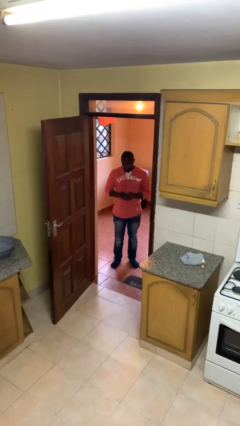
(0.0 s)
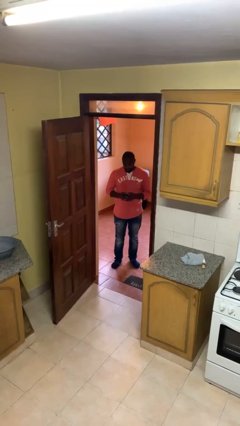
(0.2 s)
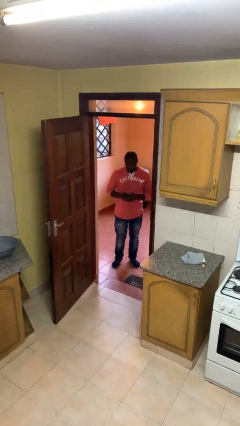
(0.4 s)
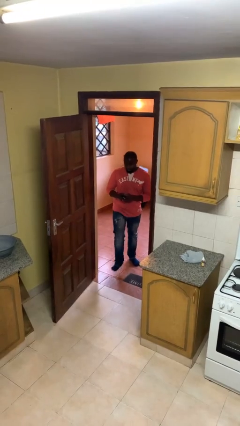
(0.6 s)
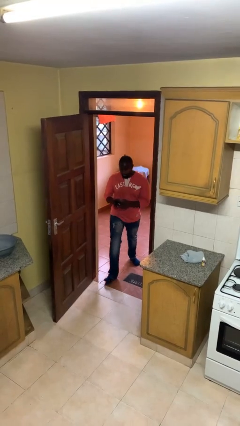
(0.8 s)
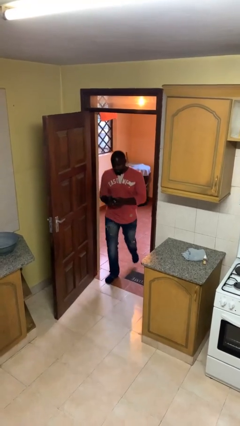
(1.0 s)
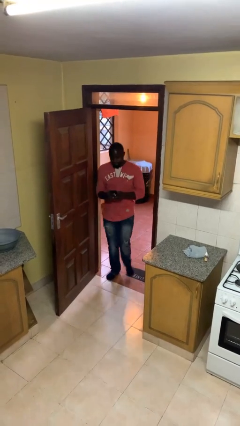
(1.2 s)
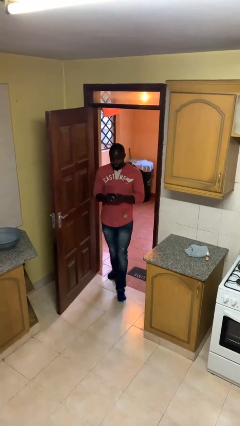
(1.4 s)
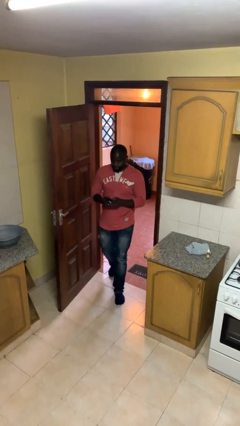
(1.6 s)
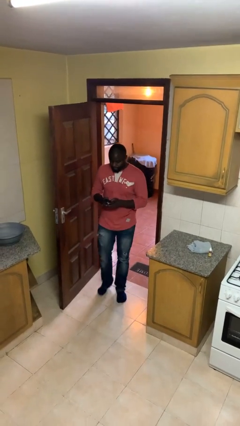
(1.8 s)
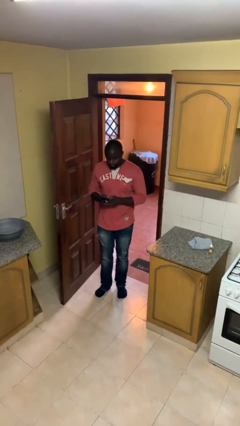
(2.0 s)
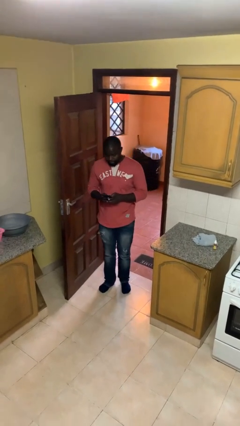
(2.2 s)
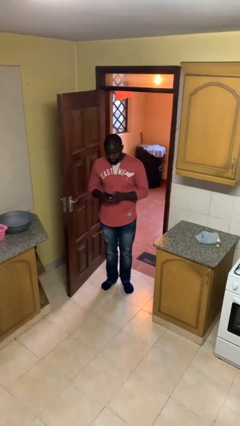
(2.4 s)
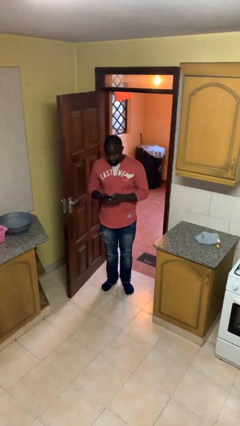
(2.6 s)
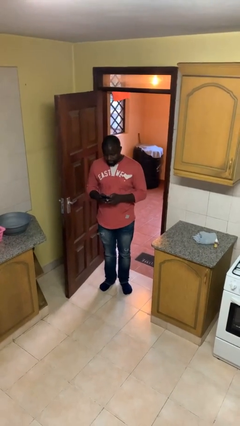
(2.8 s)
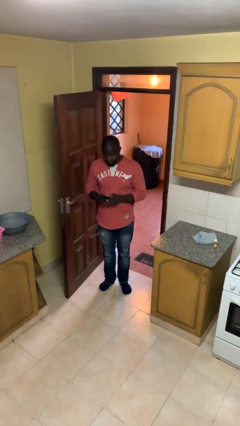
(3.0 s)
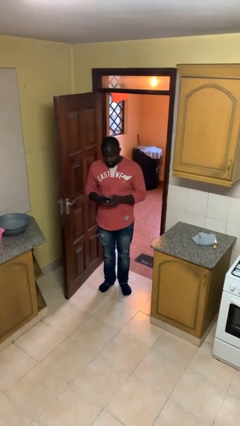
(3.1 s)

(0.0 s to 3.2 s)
person enters scene through structure

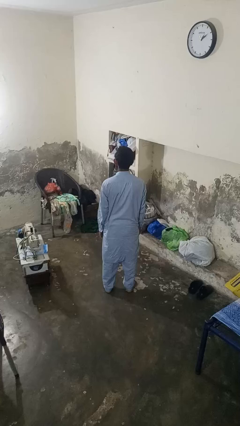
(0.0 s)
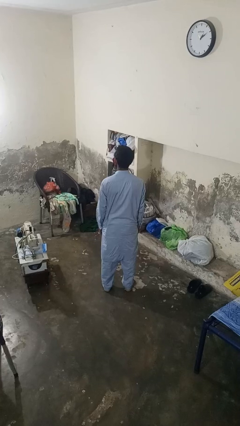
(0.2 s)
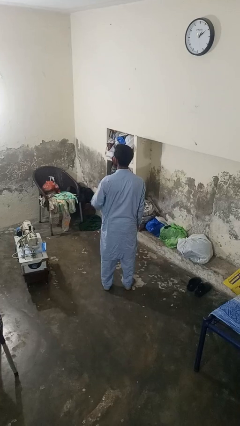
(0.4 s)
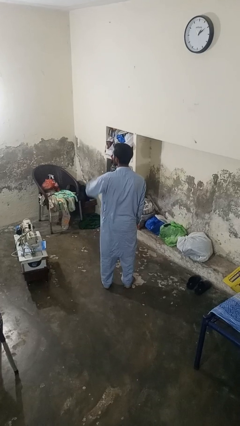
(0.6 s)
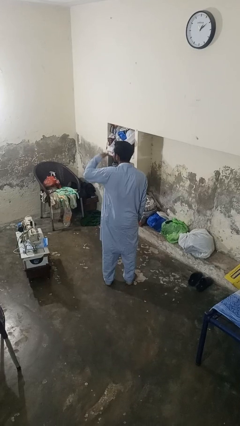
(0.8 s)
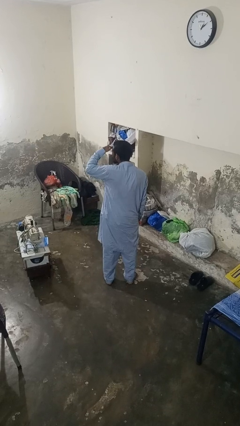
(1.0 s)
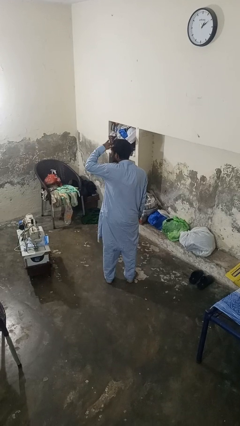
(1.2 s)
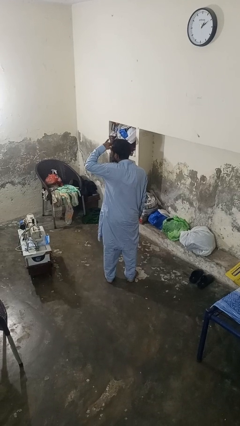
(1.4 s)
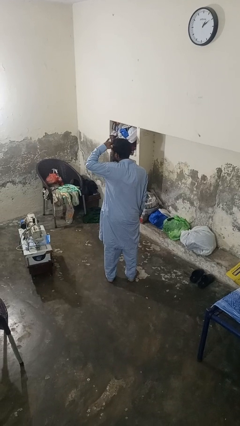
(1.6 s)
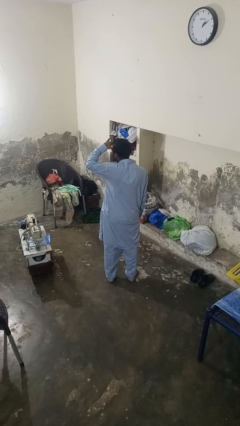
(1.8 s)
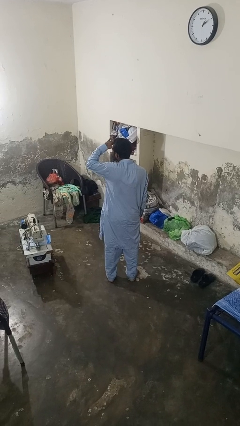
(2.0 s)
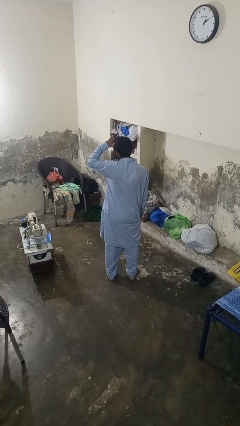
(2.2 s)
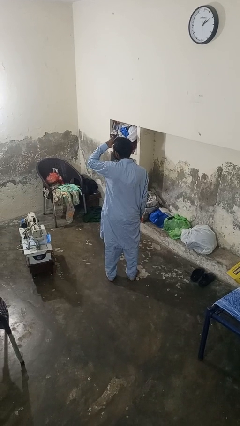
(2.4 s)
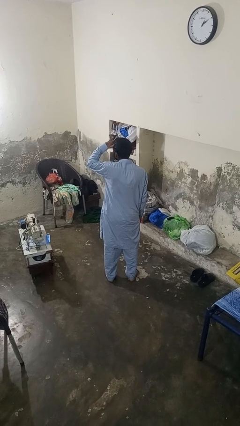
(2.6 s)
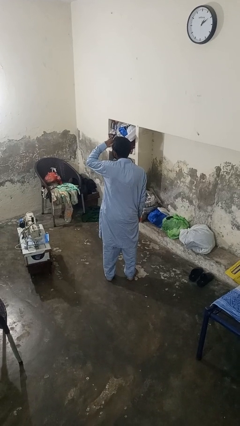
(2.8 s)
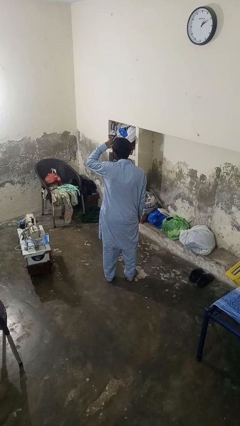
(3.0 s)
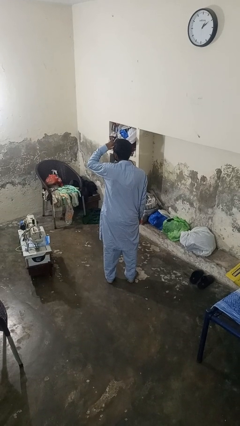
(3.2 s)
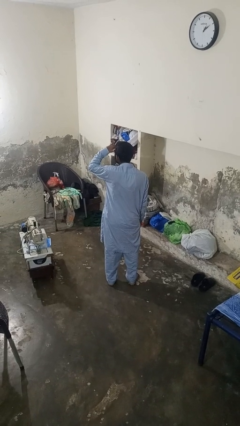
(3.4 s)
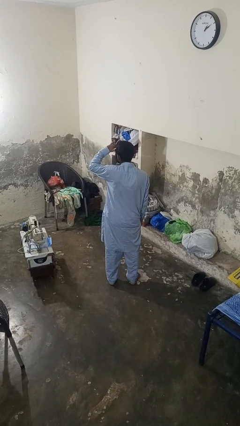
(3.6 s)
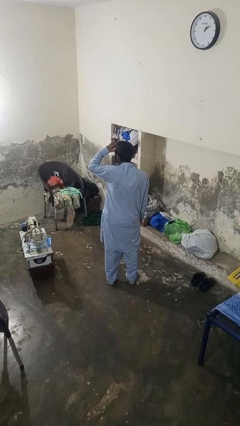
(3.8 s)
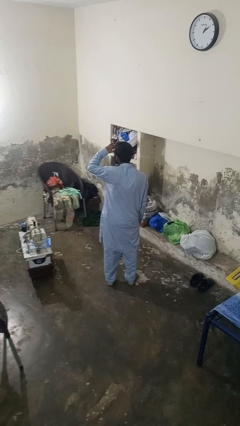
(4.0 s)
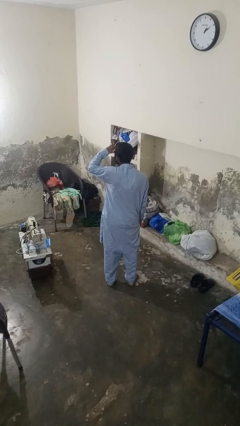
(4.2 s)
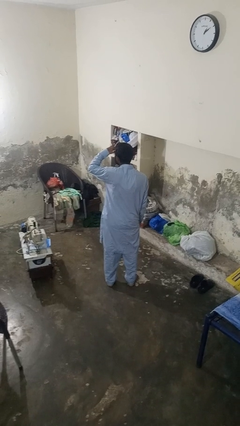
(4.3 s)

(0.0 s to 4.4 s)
person shades eyes

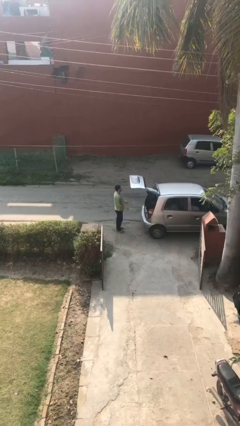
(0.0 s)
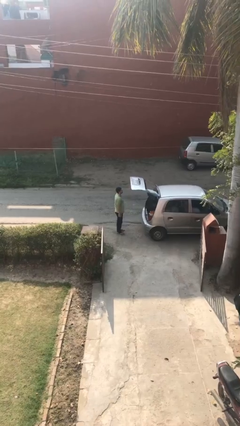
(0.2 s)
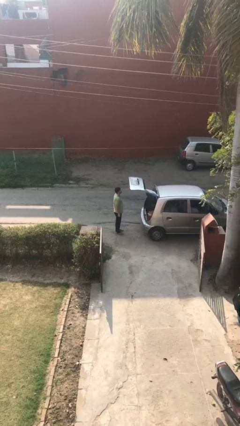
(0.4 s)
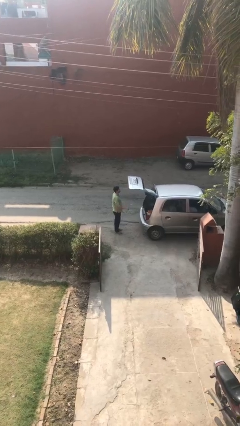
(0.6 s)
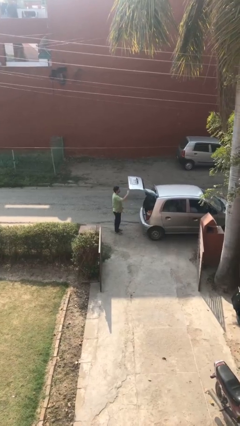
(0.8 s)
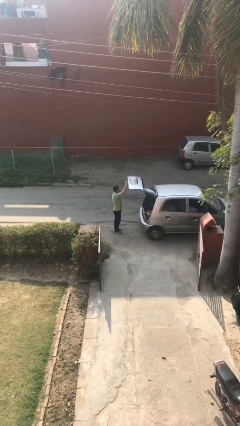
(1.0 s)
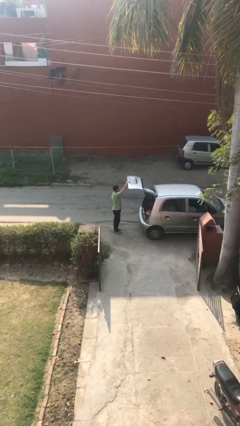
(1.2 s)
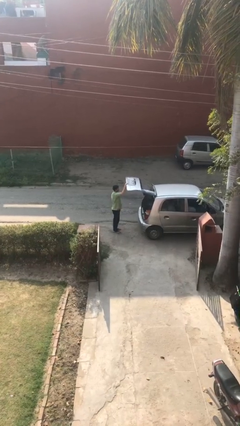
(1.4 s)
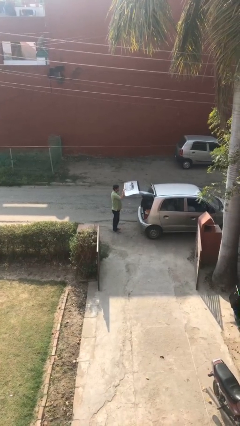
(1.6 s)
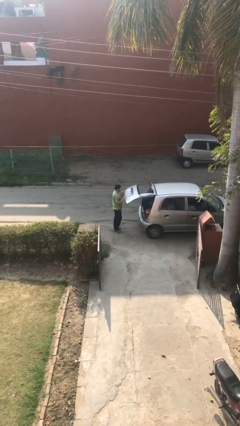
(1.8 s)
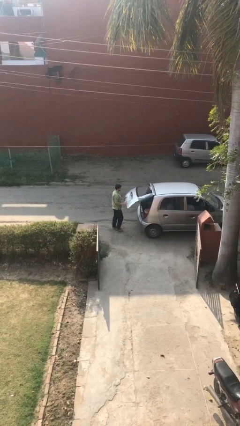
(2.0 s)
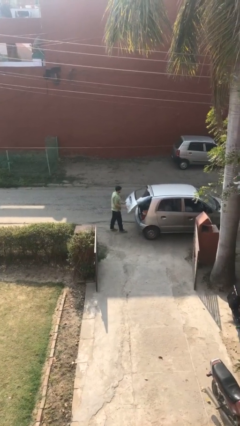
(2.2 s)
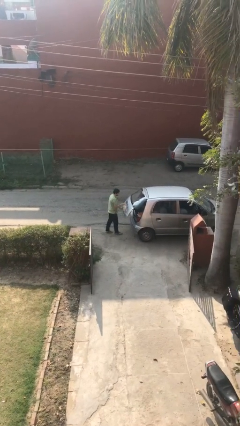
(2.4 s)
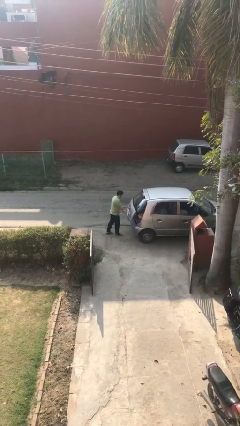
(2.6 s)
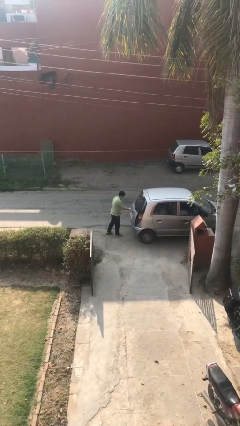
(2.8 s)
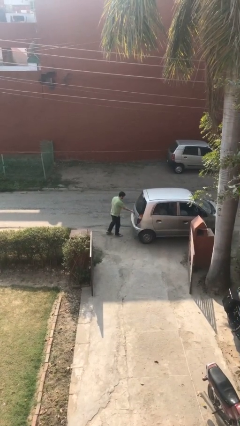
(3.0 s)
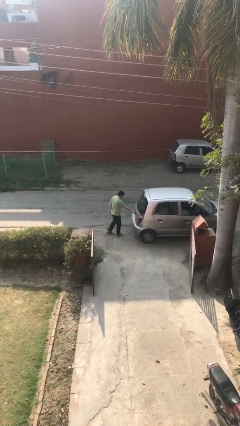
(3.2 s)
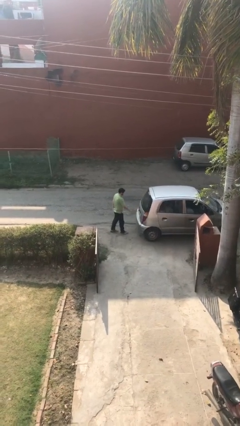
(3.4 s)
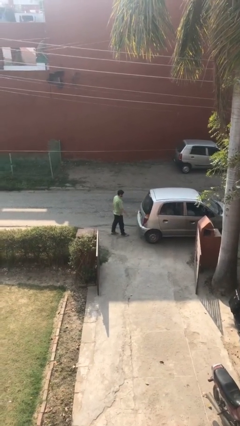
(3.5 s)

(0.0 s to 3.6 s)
person closes car trunk

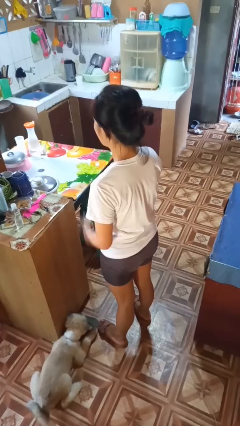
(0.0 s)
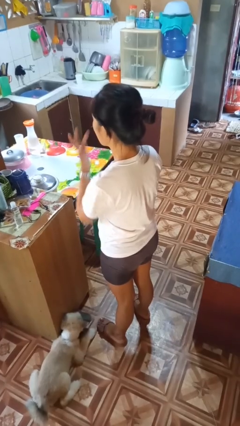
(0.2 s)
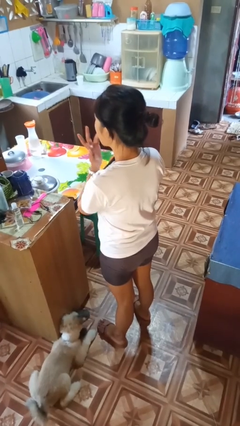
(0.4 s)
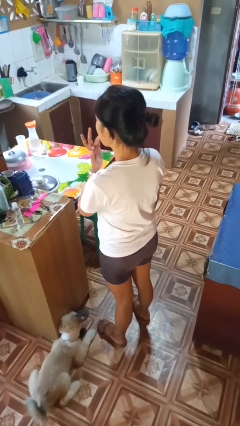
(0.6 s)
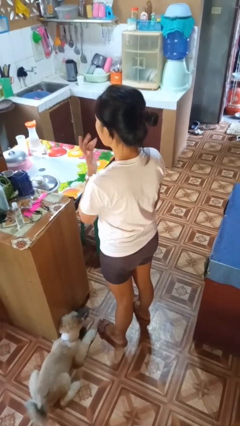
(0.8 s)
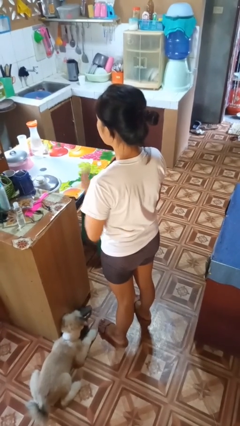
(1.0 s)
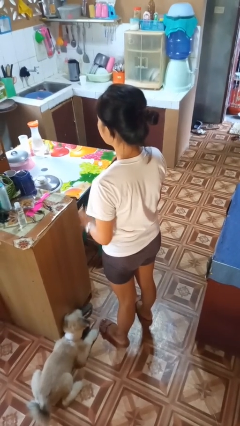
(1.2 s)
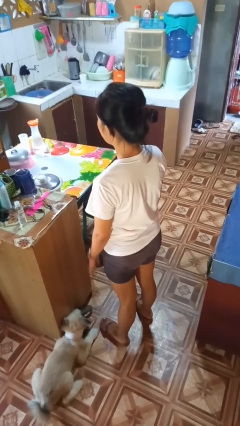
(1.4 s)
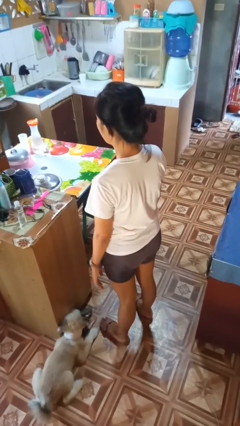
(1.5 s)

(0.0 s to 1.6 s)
person licks fingers

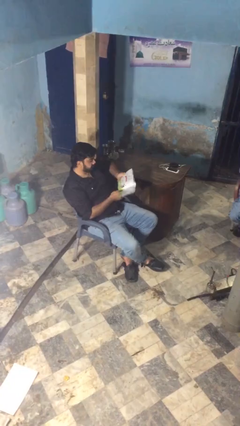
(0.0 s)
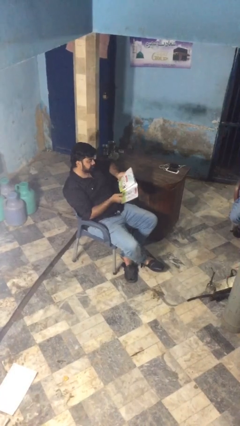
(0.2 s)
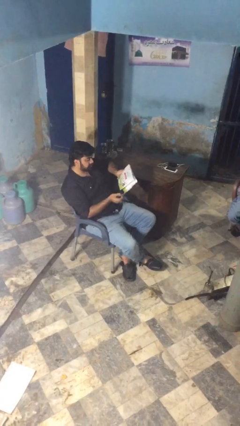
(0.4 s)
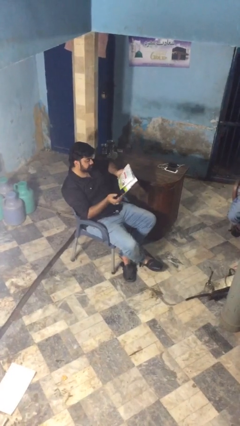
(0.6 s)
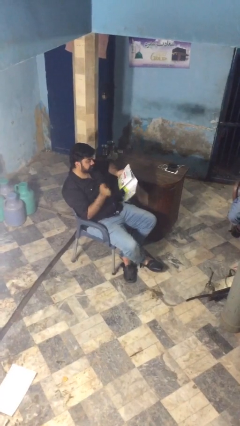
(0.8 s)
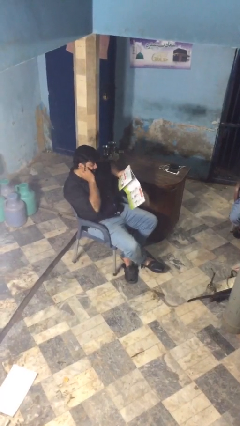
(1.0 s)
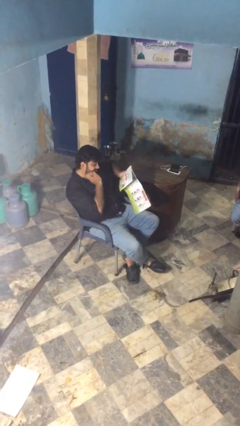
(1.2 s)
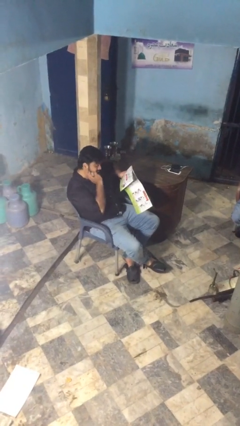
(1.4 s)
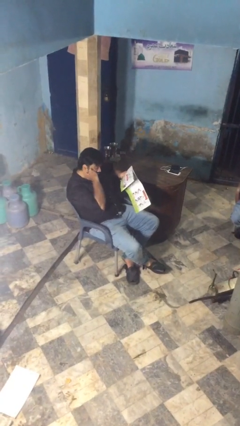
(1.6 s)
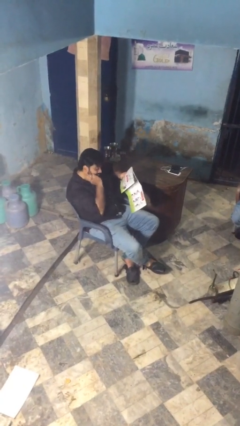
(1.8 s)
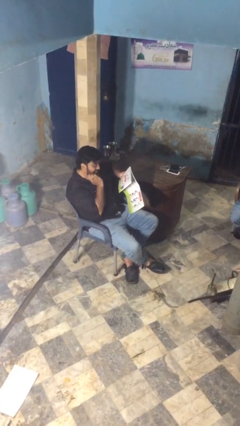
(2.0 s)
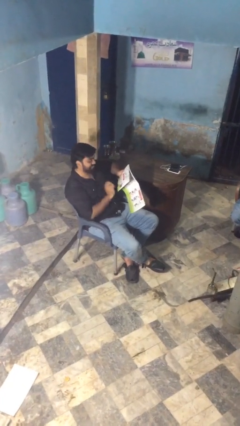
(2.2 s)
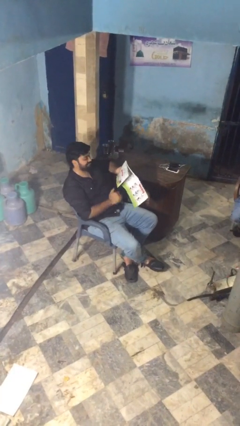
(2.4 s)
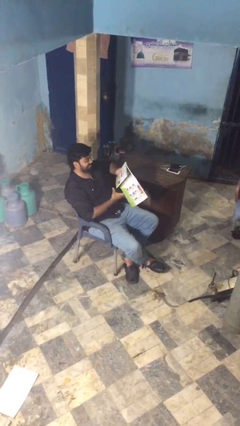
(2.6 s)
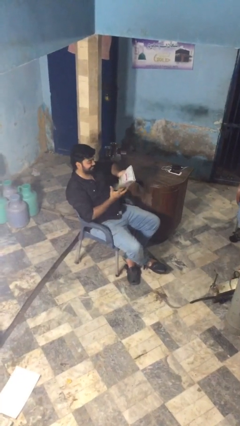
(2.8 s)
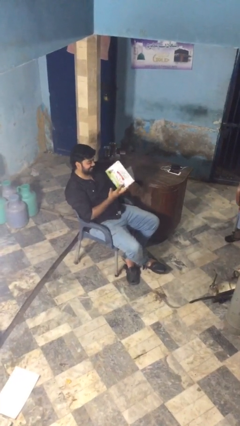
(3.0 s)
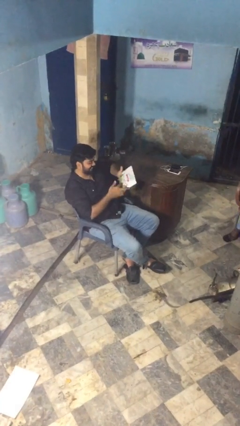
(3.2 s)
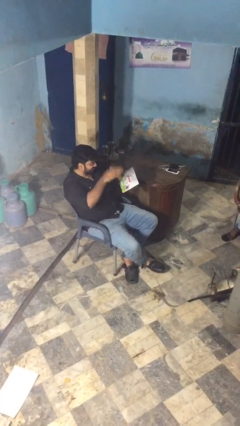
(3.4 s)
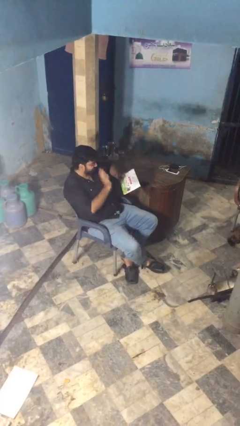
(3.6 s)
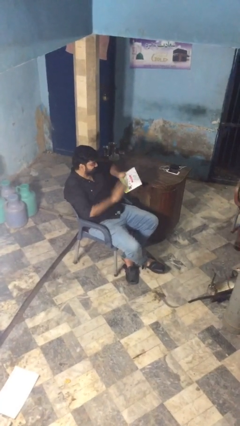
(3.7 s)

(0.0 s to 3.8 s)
person reads document

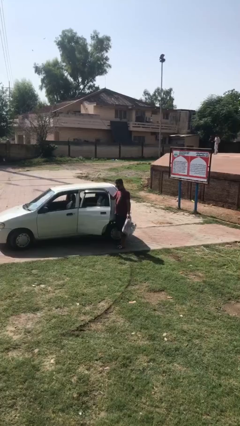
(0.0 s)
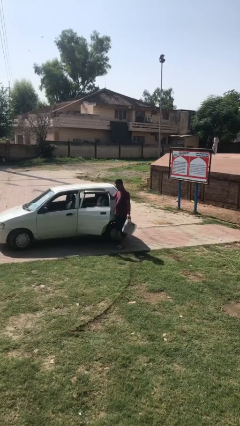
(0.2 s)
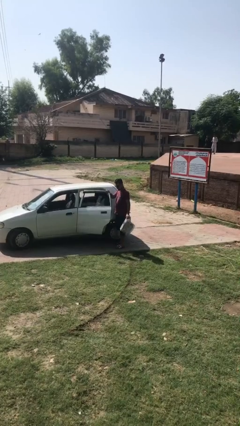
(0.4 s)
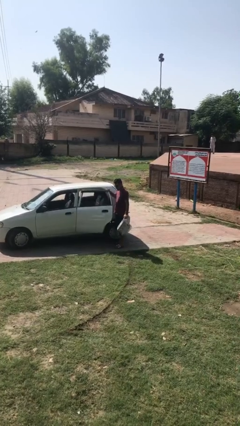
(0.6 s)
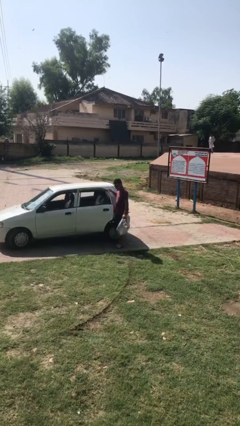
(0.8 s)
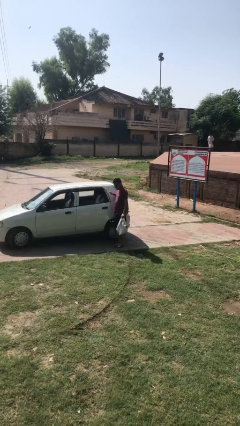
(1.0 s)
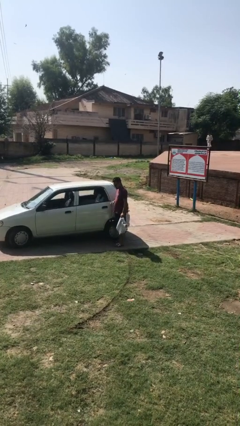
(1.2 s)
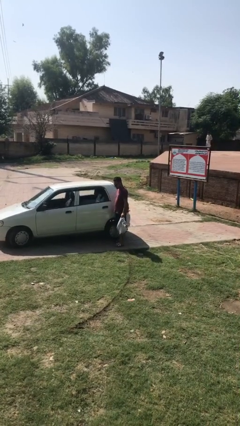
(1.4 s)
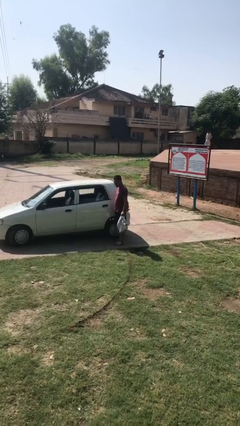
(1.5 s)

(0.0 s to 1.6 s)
person closes car door
